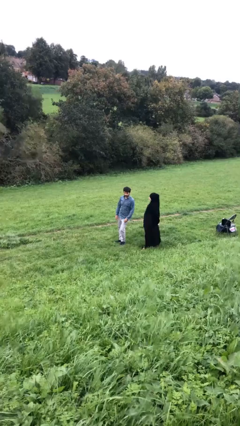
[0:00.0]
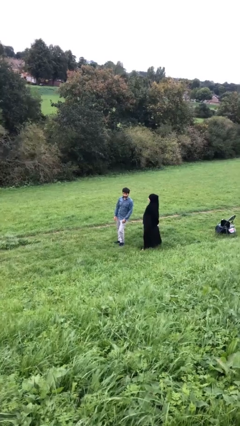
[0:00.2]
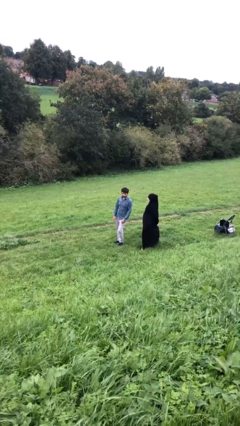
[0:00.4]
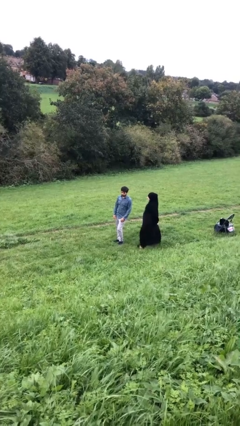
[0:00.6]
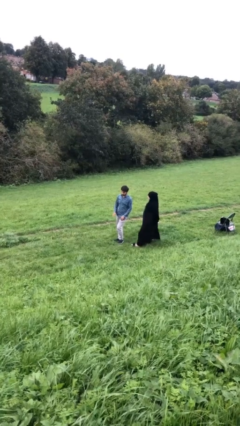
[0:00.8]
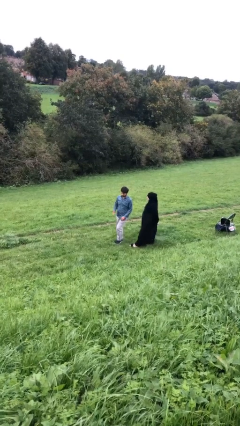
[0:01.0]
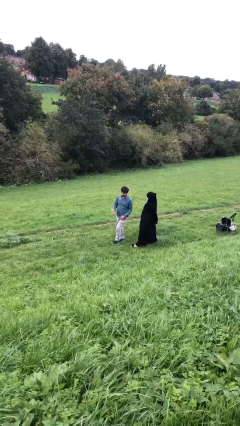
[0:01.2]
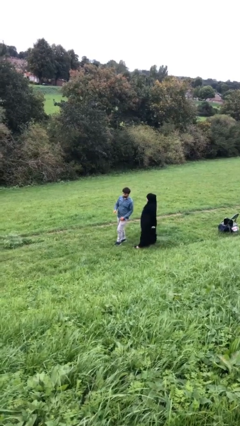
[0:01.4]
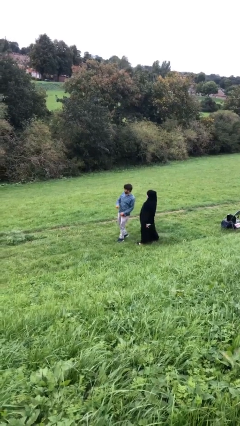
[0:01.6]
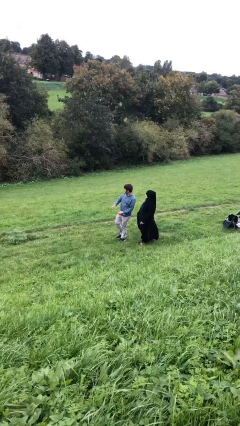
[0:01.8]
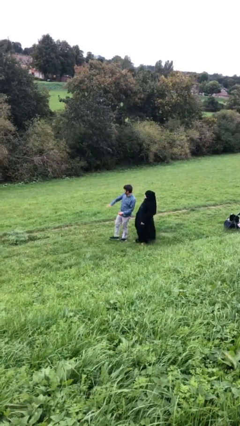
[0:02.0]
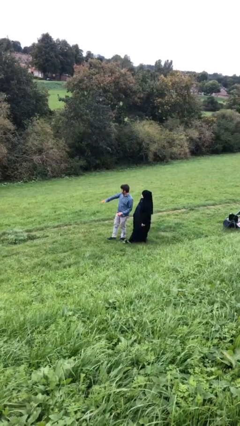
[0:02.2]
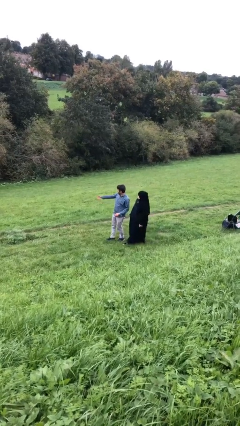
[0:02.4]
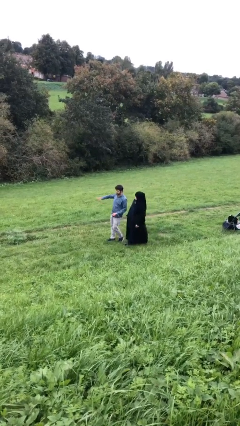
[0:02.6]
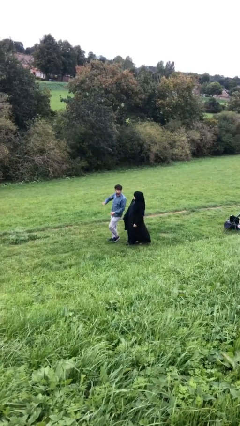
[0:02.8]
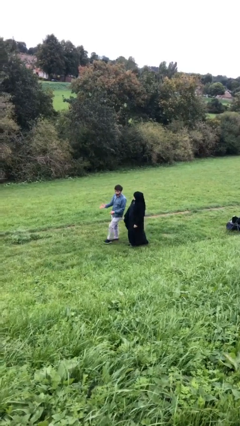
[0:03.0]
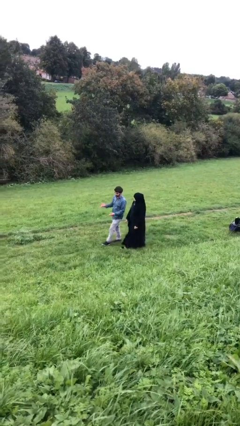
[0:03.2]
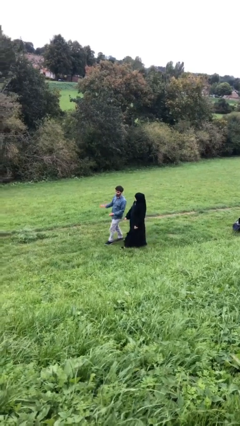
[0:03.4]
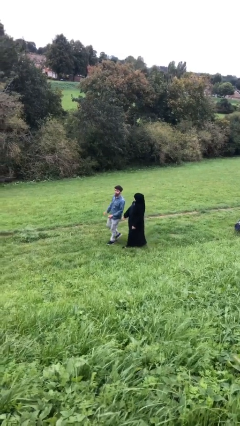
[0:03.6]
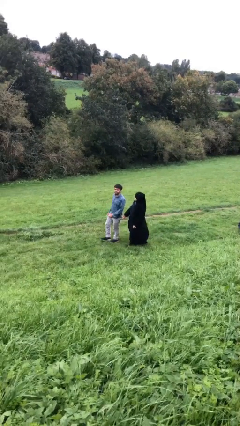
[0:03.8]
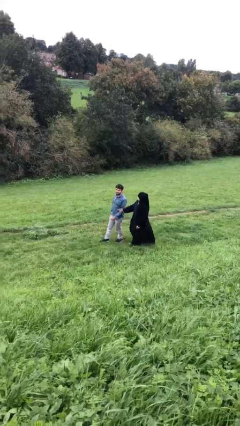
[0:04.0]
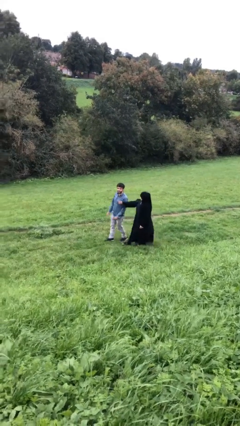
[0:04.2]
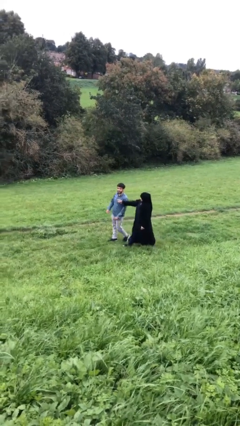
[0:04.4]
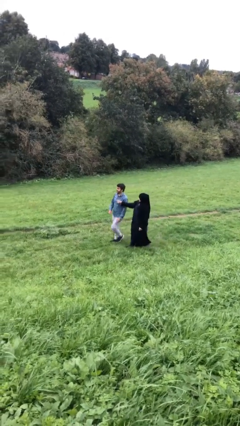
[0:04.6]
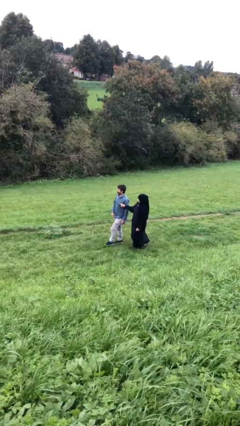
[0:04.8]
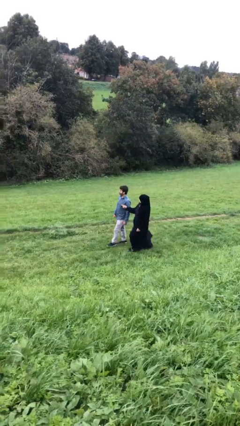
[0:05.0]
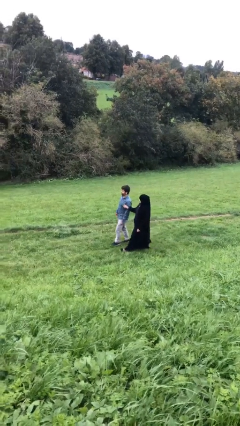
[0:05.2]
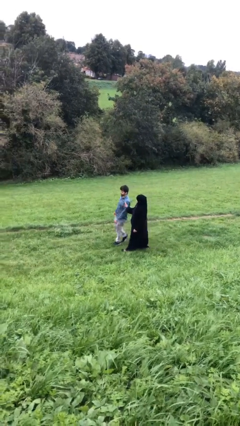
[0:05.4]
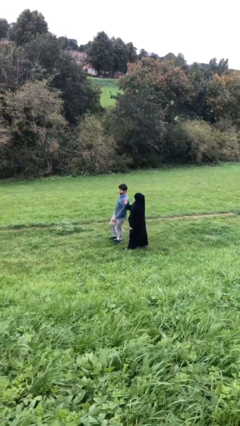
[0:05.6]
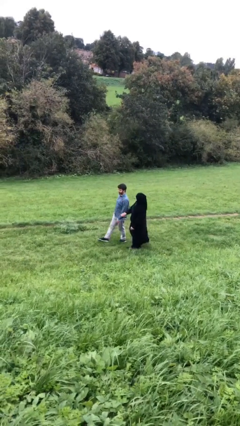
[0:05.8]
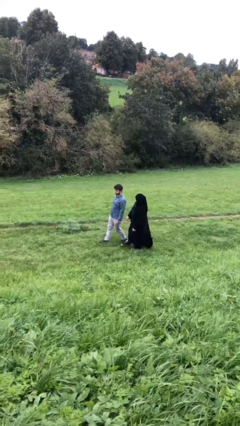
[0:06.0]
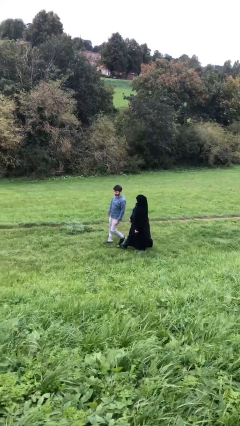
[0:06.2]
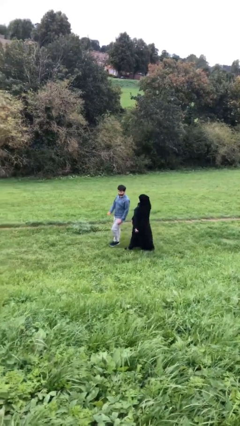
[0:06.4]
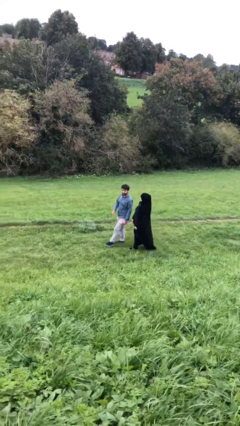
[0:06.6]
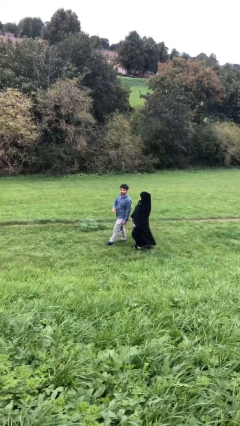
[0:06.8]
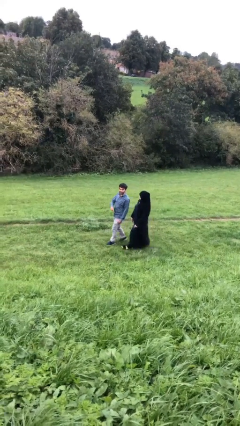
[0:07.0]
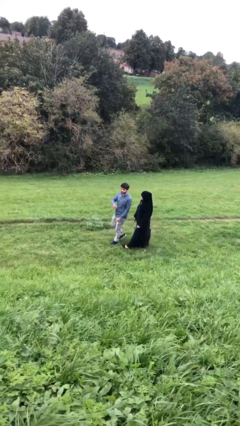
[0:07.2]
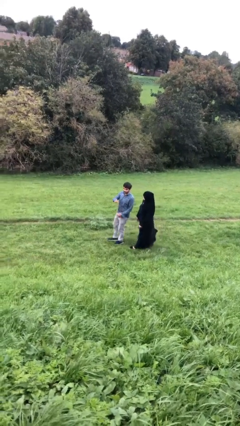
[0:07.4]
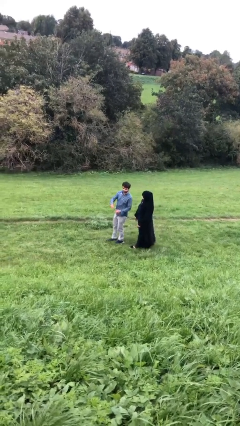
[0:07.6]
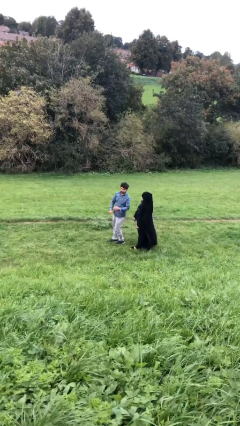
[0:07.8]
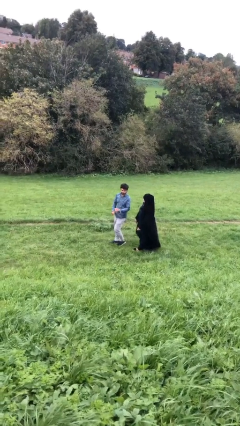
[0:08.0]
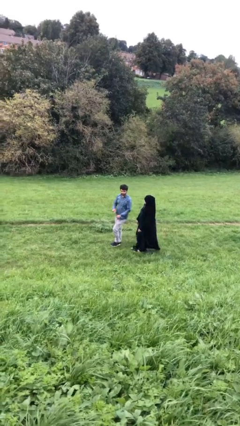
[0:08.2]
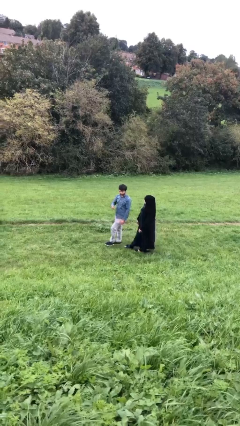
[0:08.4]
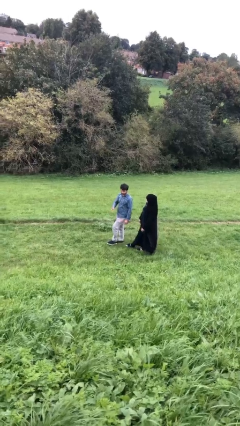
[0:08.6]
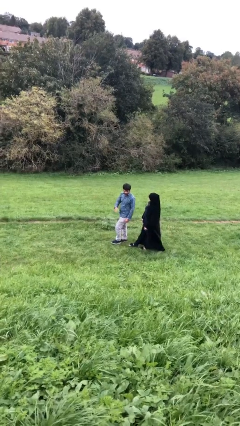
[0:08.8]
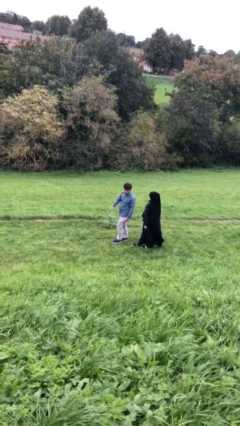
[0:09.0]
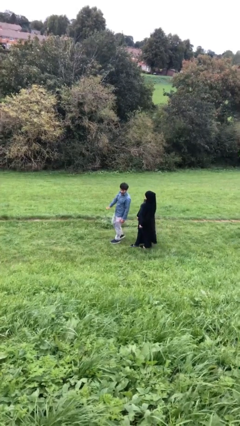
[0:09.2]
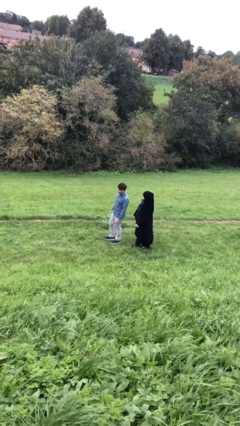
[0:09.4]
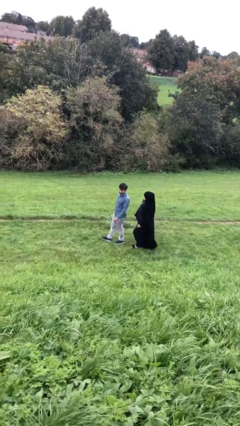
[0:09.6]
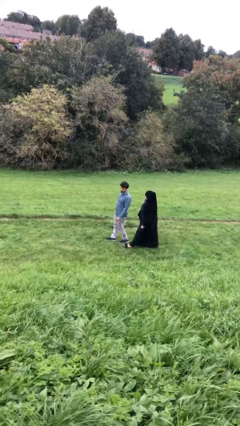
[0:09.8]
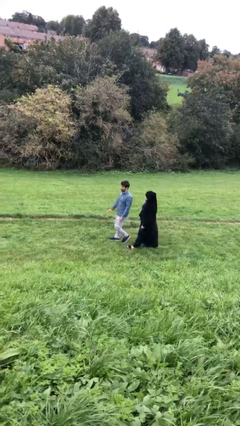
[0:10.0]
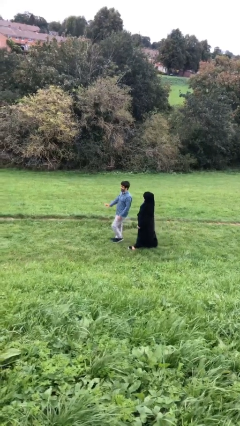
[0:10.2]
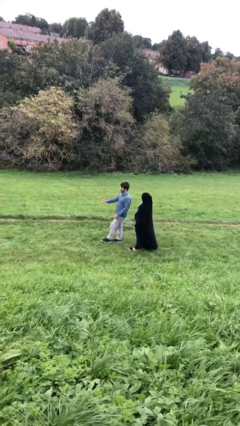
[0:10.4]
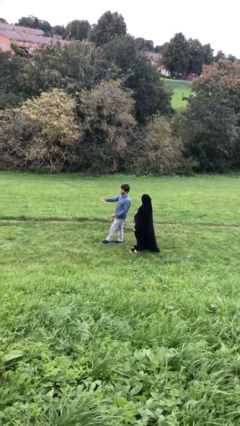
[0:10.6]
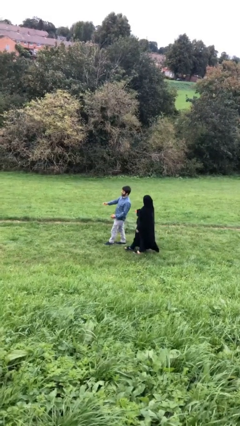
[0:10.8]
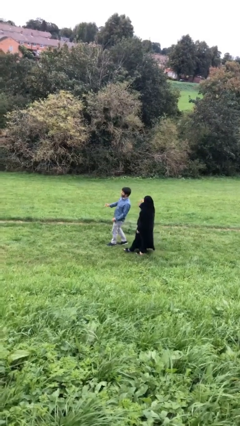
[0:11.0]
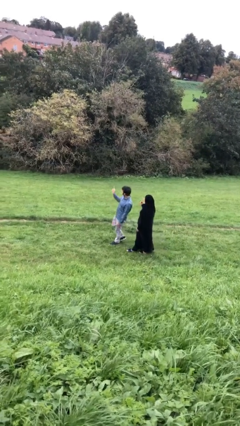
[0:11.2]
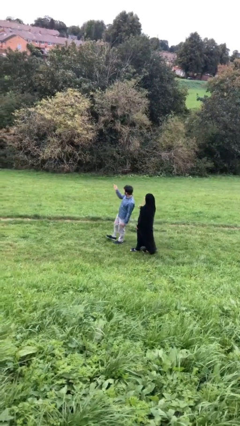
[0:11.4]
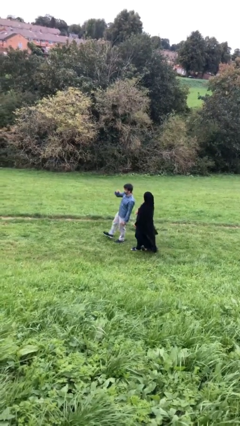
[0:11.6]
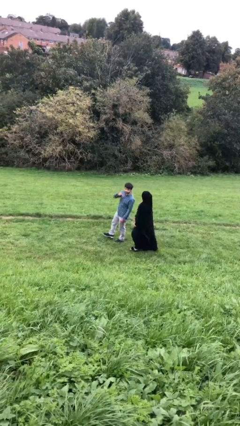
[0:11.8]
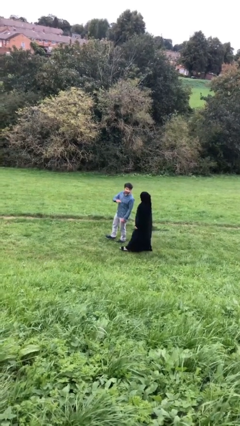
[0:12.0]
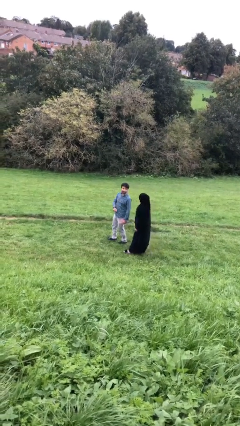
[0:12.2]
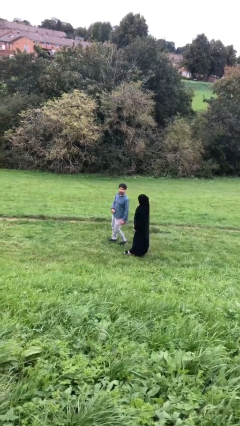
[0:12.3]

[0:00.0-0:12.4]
person talks to person

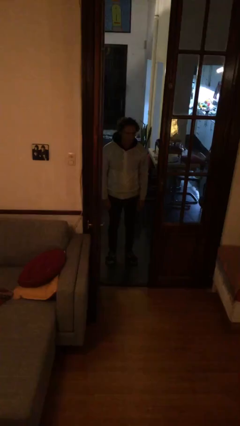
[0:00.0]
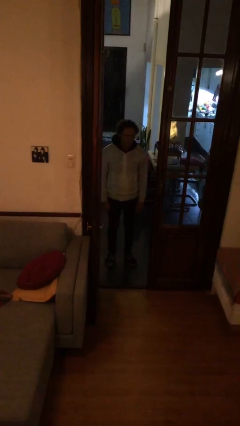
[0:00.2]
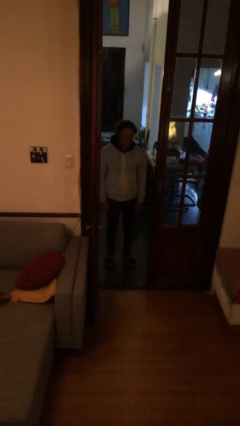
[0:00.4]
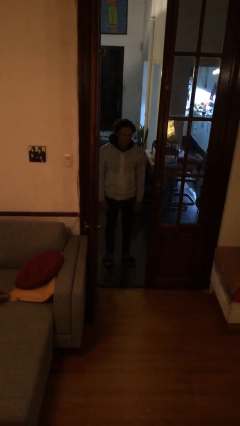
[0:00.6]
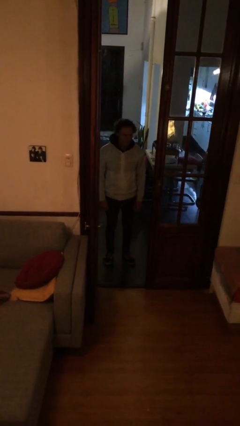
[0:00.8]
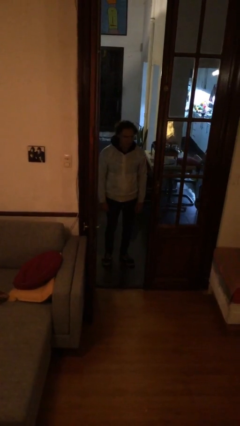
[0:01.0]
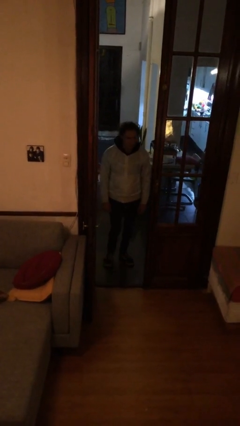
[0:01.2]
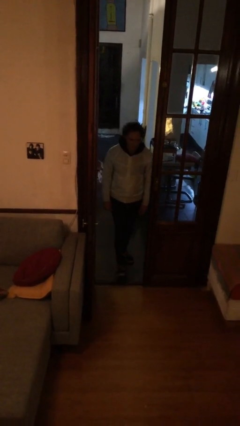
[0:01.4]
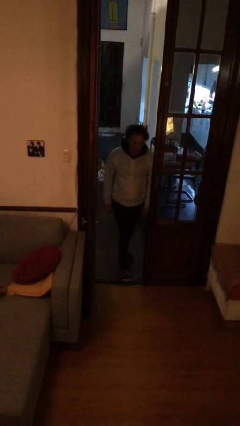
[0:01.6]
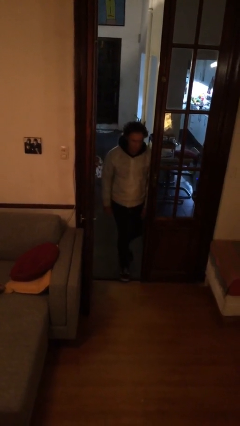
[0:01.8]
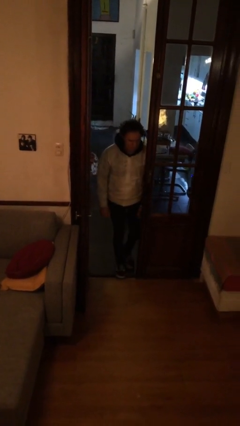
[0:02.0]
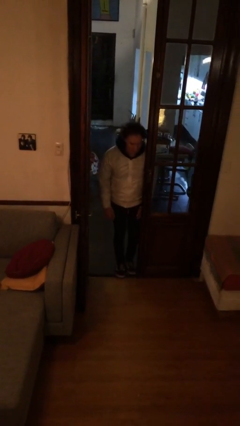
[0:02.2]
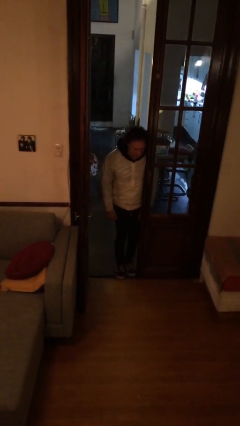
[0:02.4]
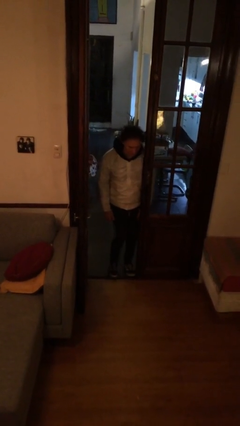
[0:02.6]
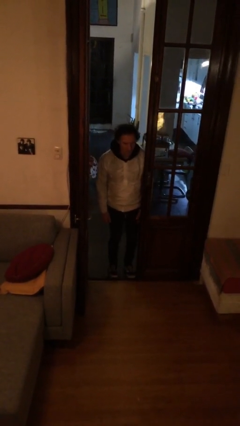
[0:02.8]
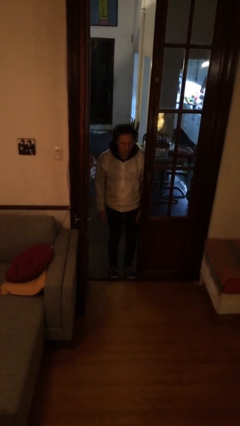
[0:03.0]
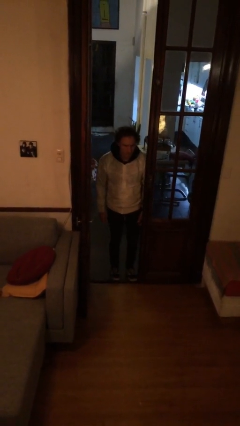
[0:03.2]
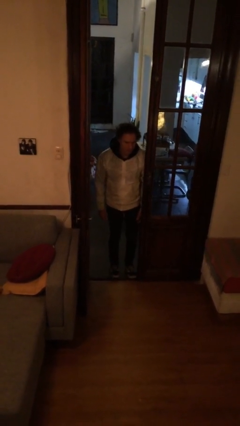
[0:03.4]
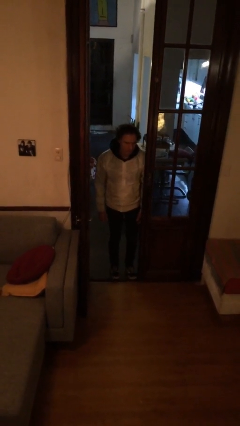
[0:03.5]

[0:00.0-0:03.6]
person bumps into wall

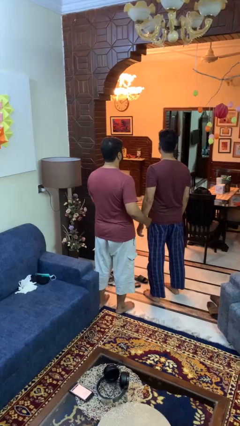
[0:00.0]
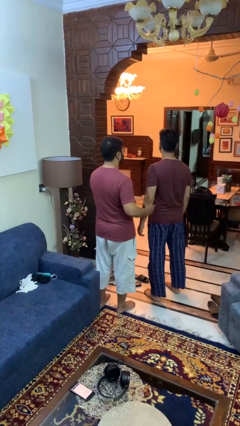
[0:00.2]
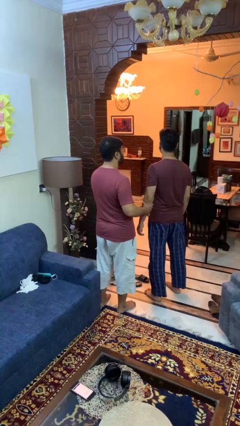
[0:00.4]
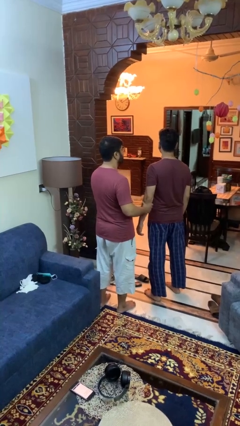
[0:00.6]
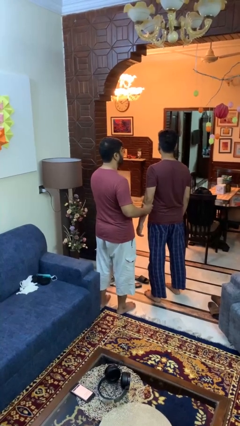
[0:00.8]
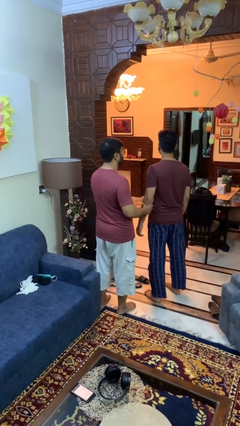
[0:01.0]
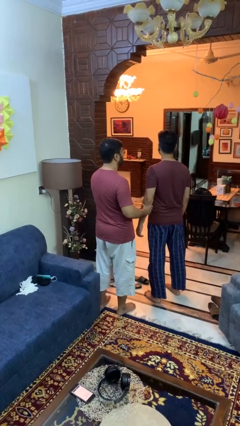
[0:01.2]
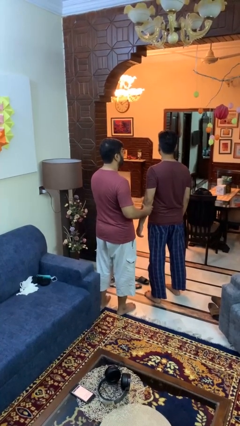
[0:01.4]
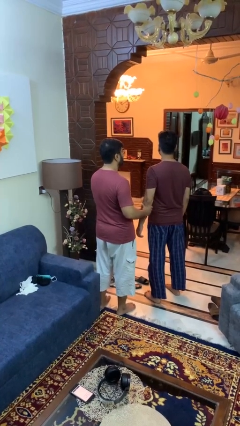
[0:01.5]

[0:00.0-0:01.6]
person grabs person by forearm

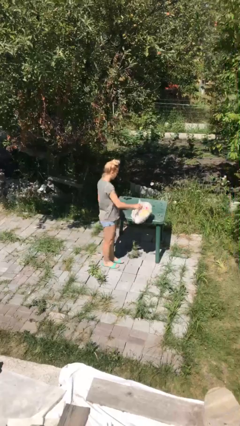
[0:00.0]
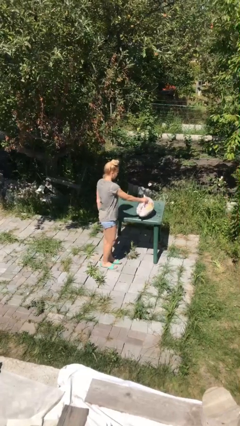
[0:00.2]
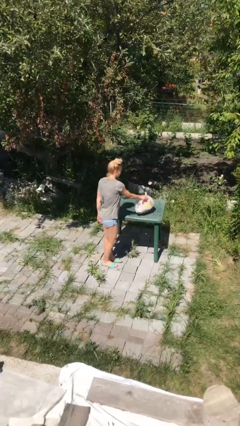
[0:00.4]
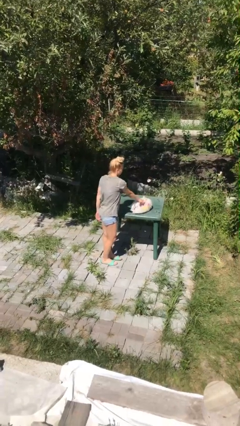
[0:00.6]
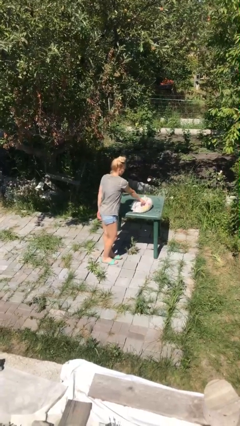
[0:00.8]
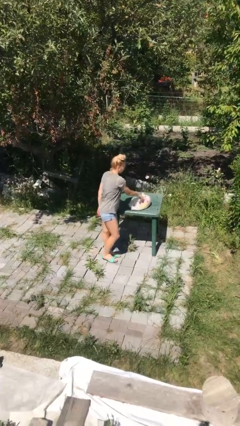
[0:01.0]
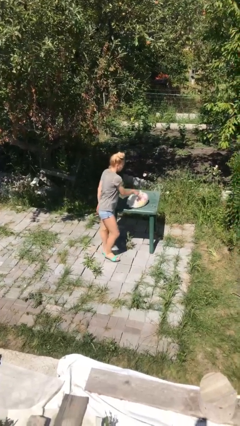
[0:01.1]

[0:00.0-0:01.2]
person puts down object on table
